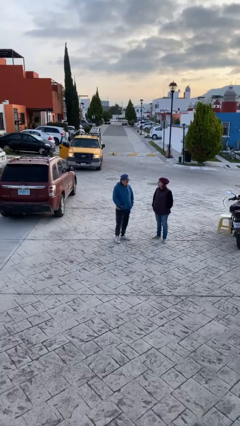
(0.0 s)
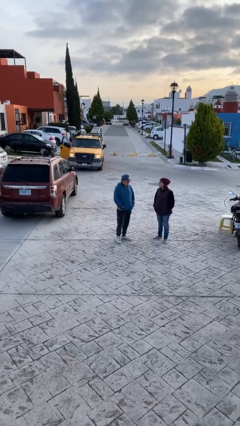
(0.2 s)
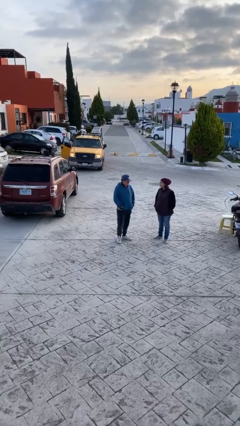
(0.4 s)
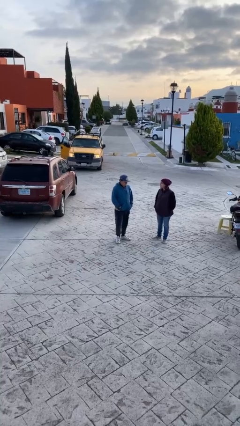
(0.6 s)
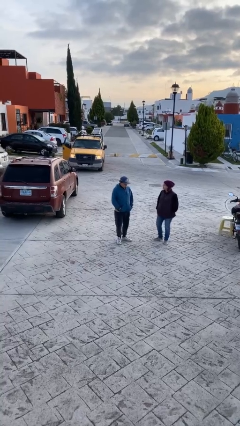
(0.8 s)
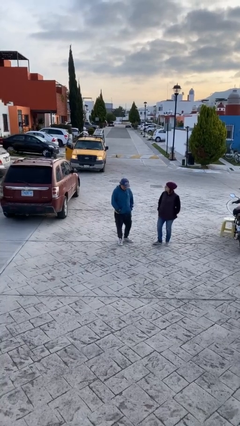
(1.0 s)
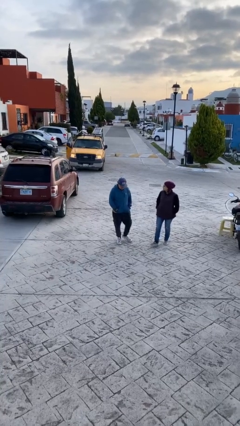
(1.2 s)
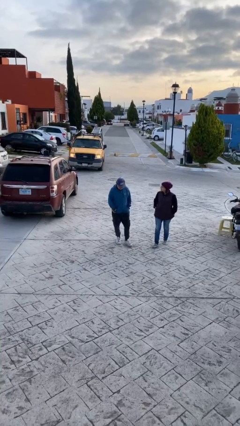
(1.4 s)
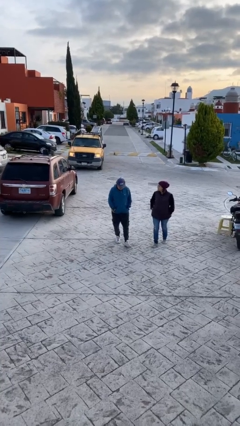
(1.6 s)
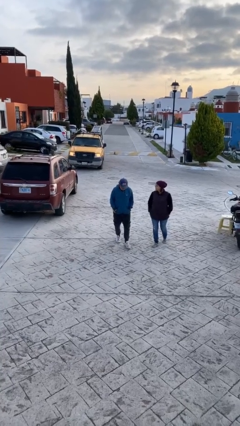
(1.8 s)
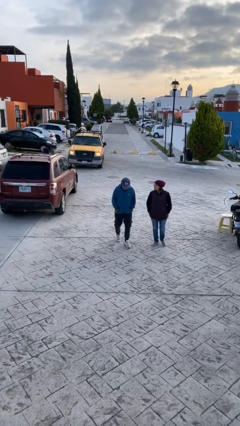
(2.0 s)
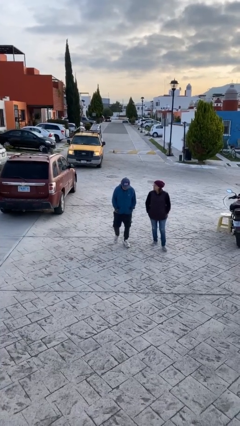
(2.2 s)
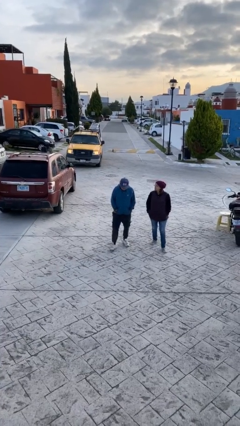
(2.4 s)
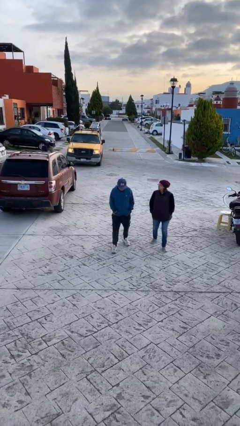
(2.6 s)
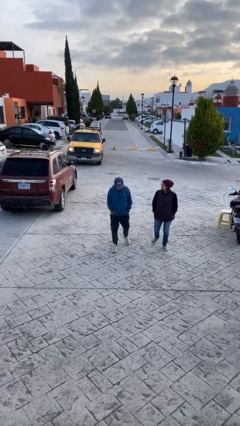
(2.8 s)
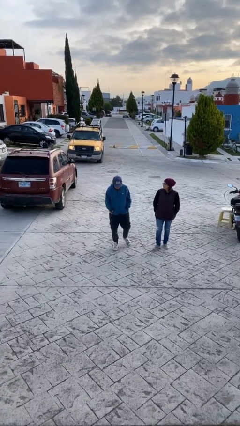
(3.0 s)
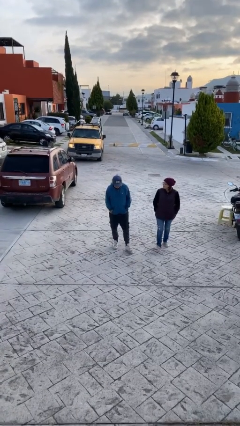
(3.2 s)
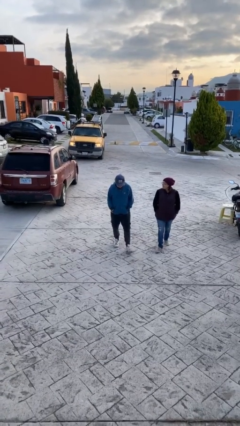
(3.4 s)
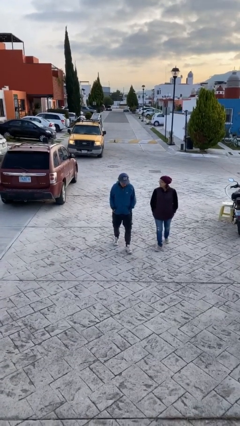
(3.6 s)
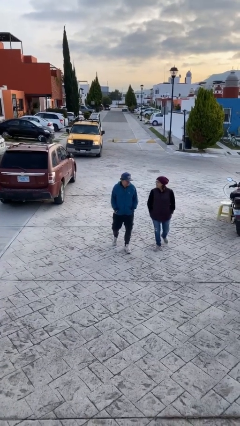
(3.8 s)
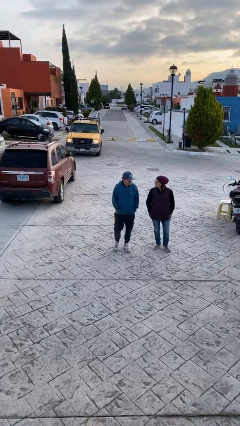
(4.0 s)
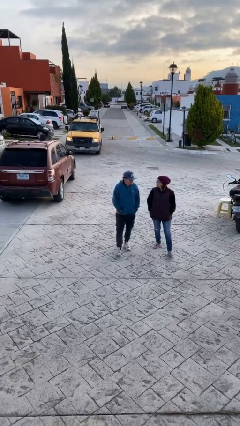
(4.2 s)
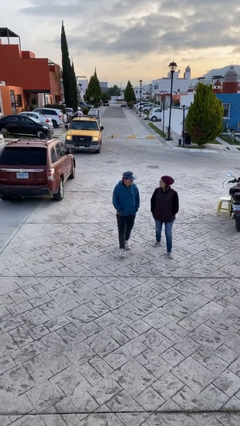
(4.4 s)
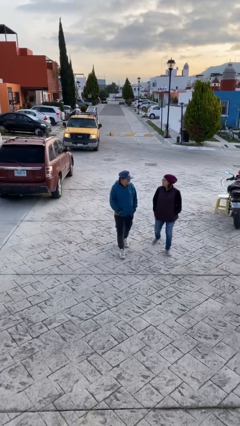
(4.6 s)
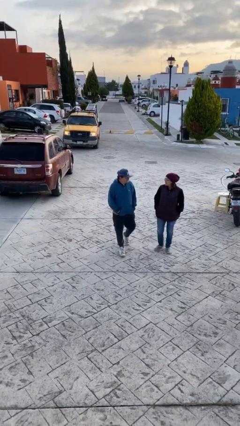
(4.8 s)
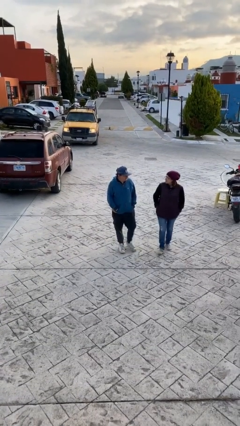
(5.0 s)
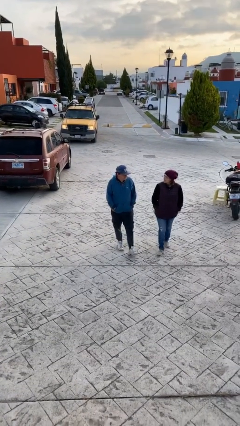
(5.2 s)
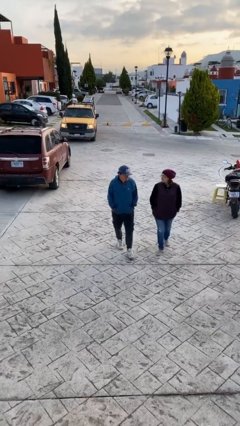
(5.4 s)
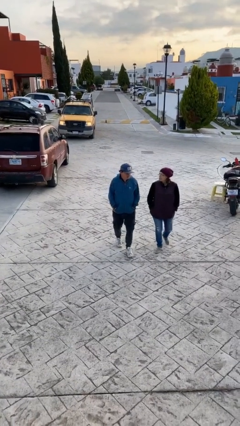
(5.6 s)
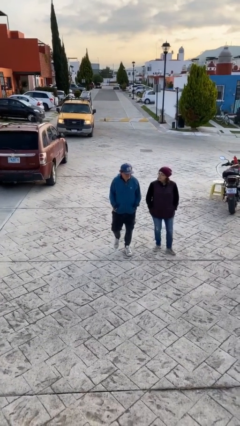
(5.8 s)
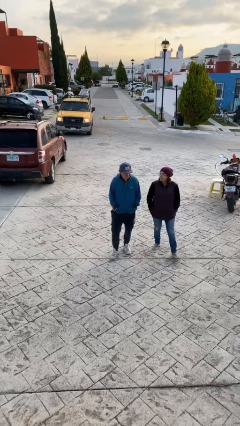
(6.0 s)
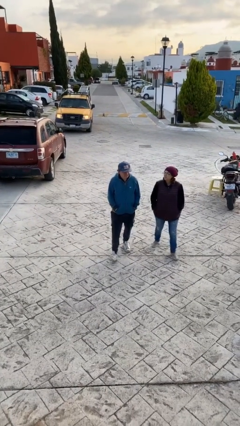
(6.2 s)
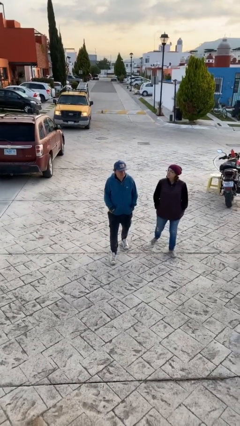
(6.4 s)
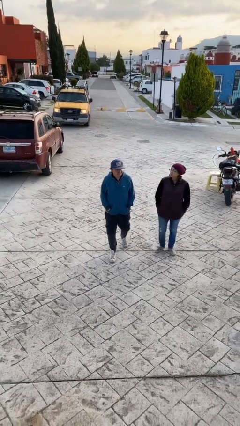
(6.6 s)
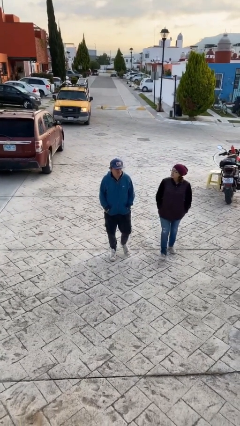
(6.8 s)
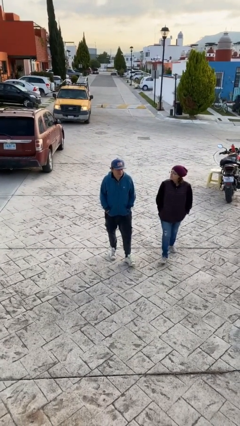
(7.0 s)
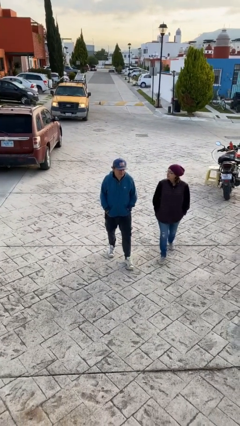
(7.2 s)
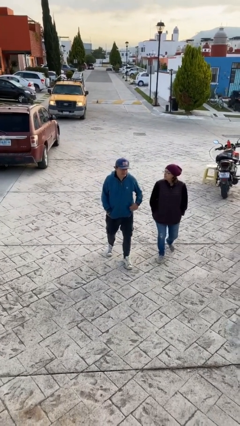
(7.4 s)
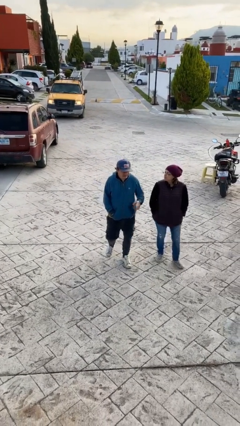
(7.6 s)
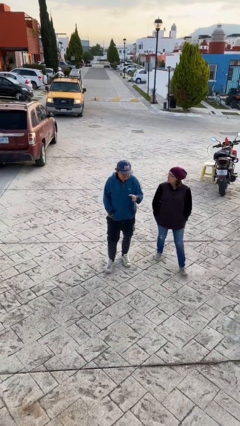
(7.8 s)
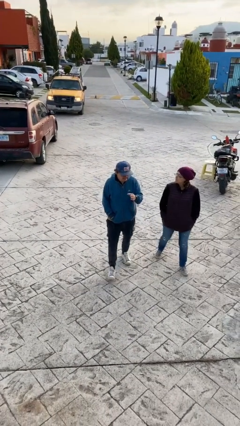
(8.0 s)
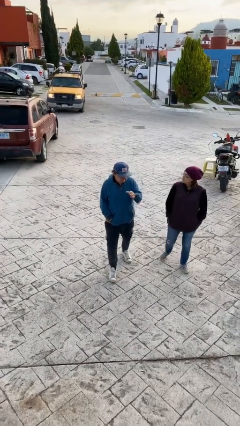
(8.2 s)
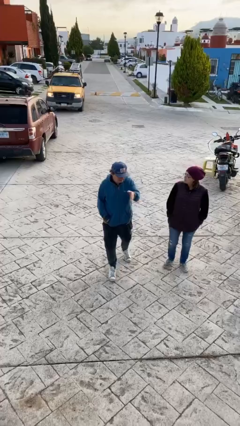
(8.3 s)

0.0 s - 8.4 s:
person talks to person

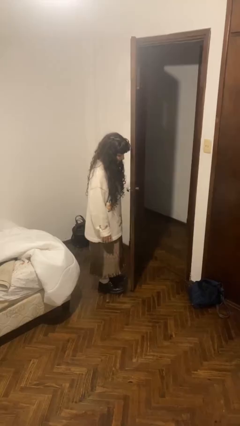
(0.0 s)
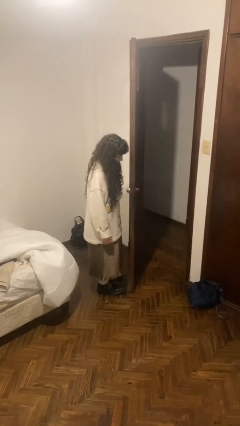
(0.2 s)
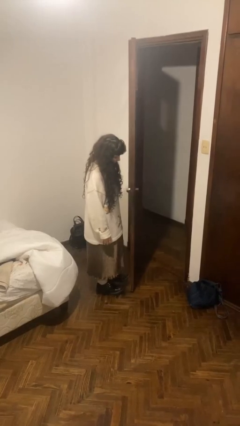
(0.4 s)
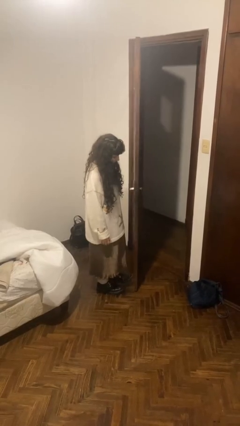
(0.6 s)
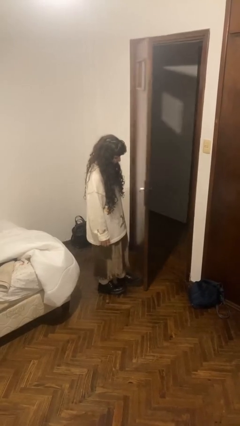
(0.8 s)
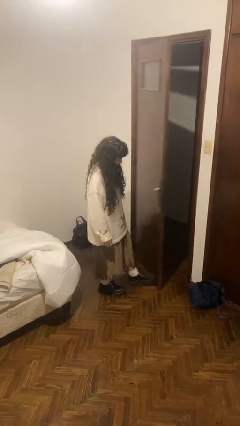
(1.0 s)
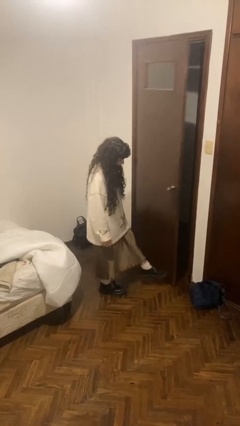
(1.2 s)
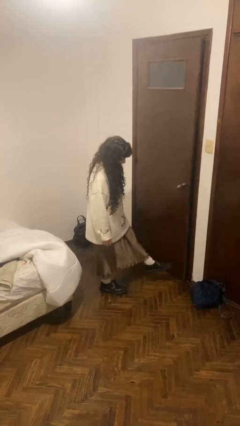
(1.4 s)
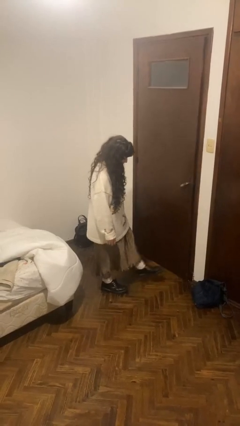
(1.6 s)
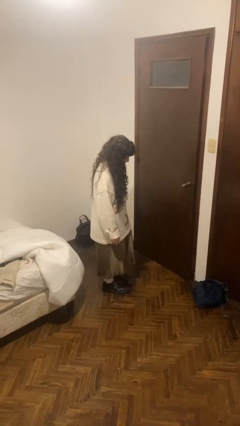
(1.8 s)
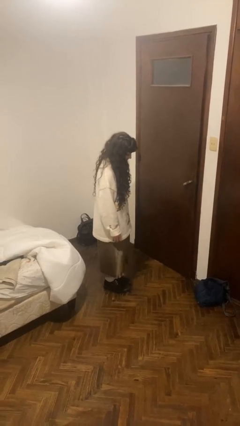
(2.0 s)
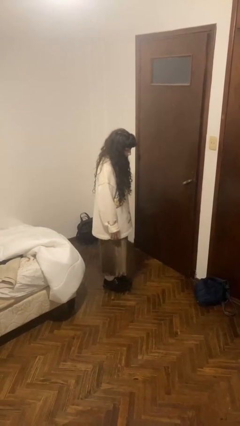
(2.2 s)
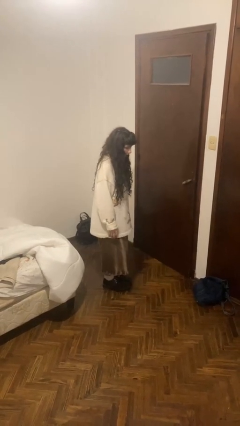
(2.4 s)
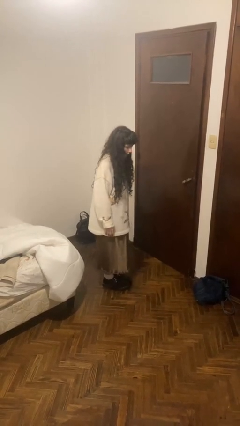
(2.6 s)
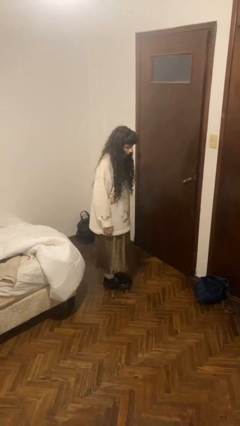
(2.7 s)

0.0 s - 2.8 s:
person closes door with foot

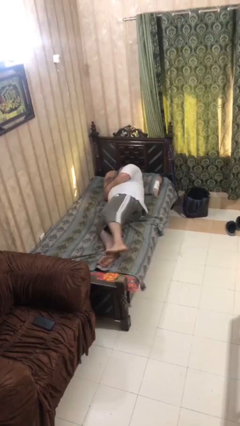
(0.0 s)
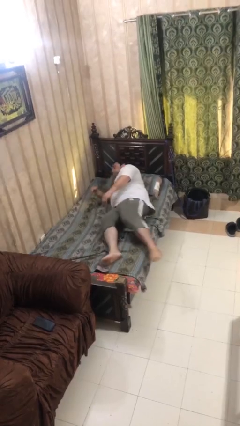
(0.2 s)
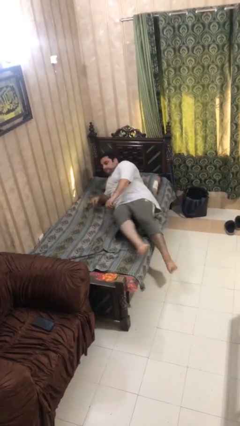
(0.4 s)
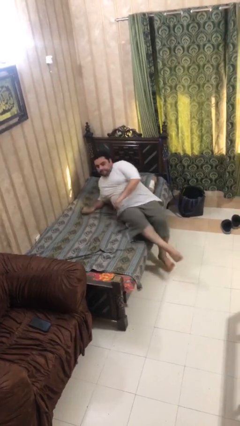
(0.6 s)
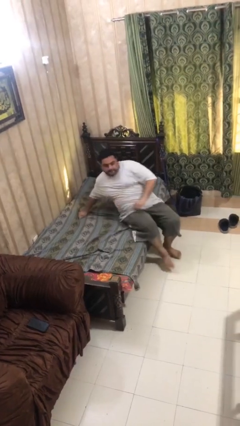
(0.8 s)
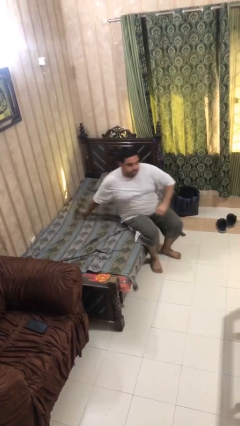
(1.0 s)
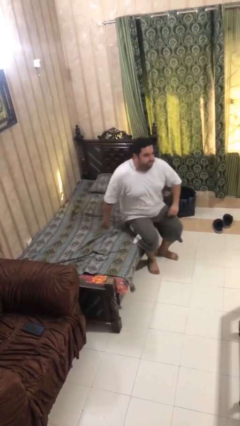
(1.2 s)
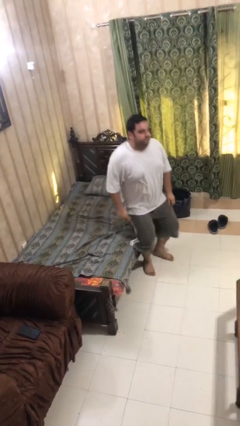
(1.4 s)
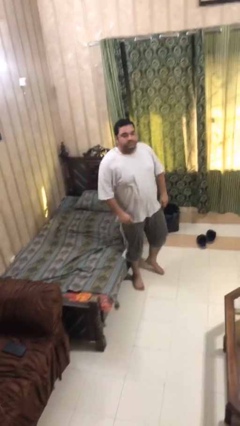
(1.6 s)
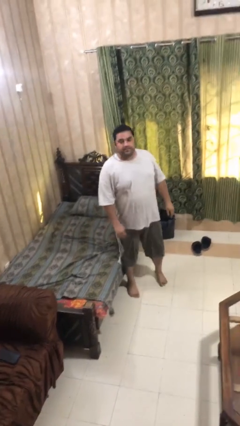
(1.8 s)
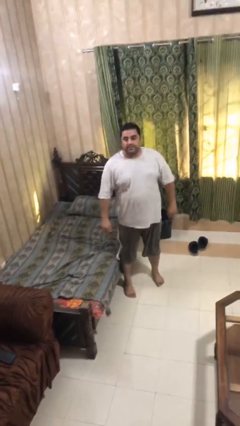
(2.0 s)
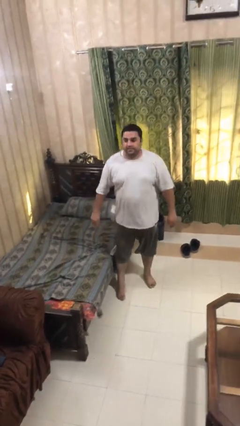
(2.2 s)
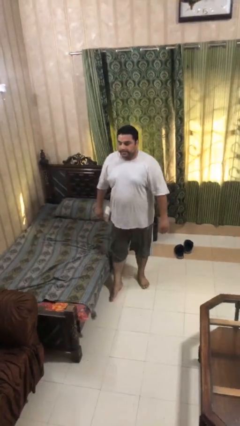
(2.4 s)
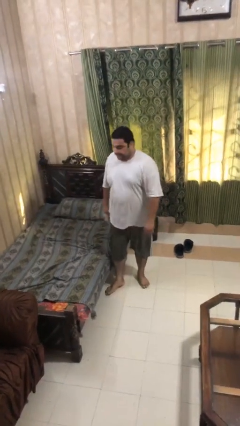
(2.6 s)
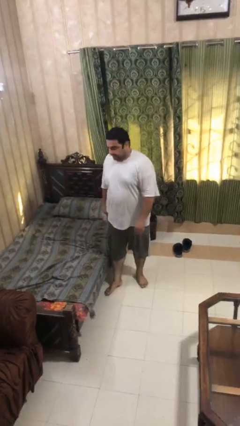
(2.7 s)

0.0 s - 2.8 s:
person stands up

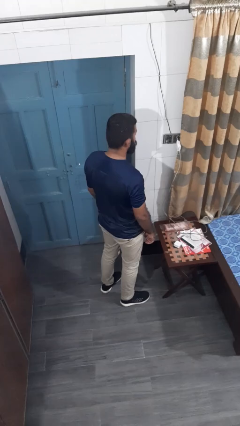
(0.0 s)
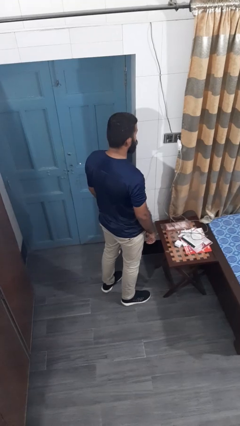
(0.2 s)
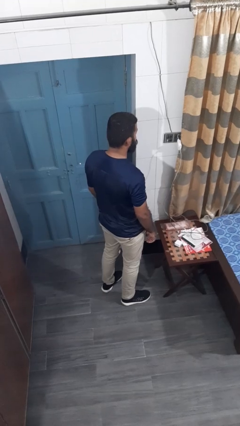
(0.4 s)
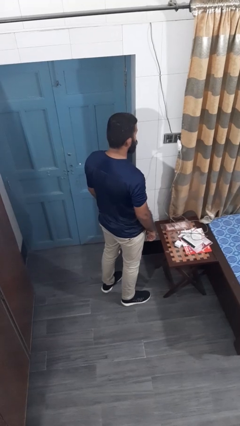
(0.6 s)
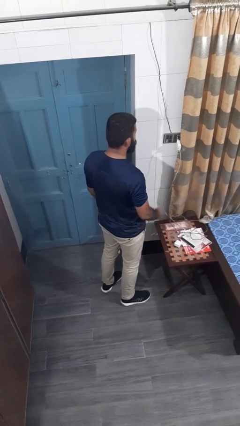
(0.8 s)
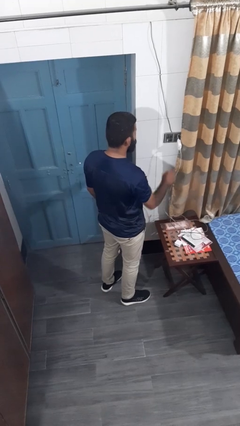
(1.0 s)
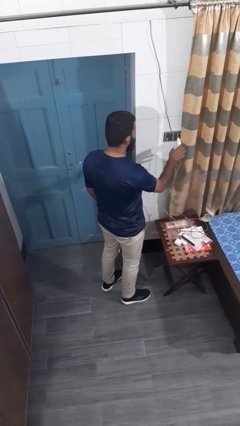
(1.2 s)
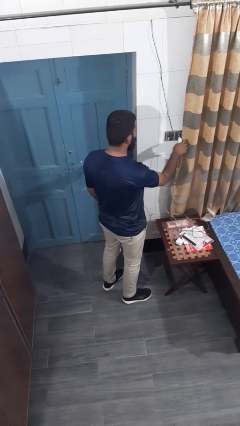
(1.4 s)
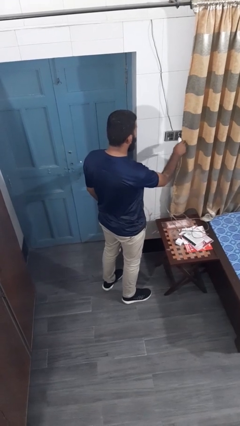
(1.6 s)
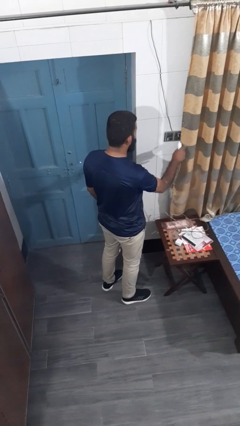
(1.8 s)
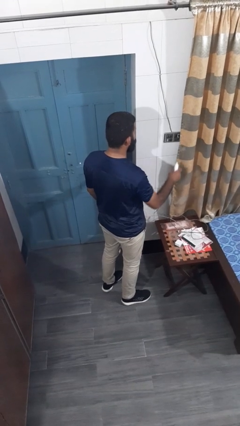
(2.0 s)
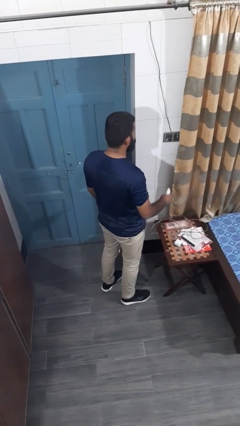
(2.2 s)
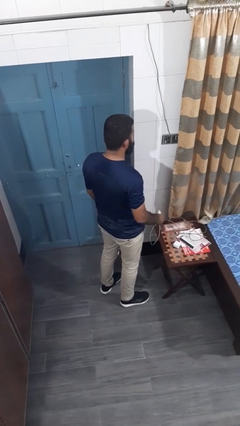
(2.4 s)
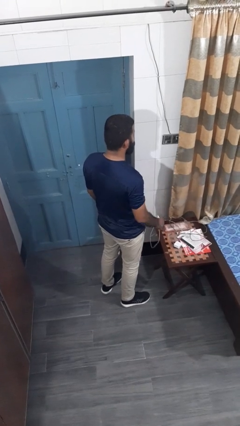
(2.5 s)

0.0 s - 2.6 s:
person unplugs from electrical socket

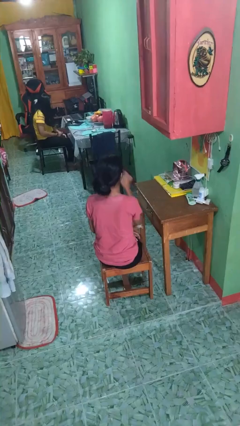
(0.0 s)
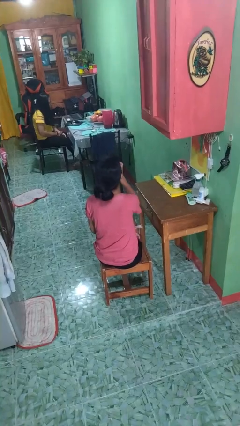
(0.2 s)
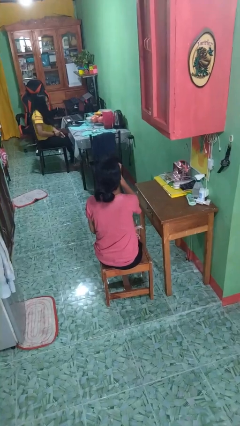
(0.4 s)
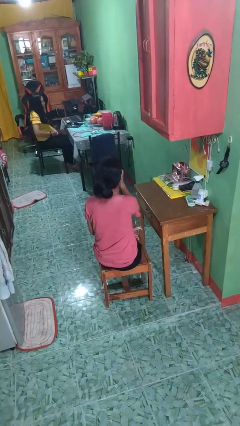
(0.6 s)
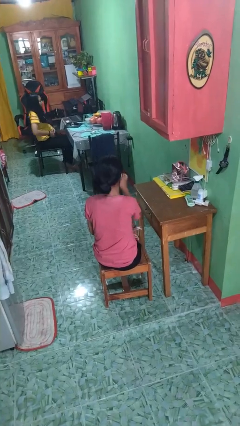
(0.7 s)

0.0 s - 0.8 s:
person drinks from shotglass

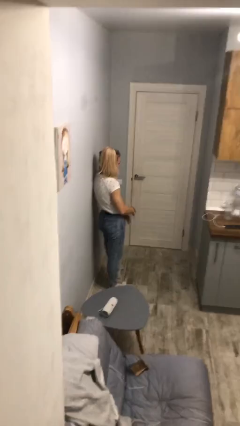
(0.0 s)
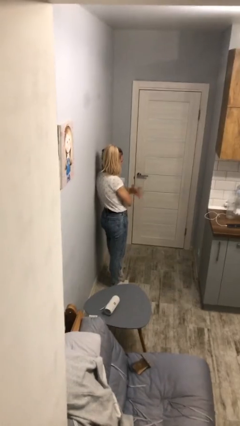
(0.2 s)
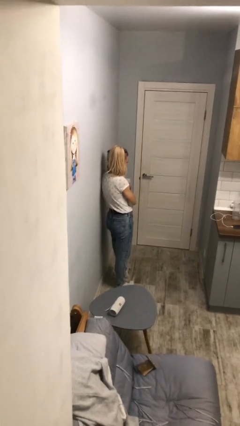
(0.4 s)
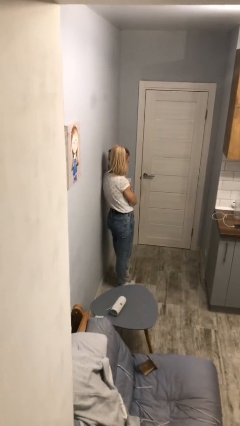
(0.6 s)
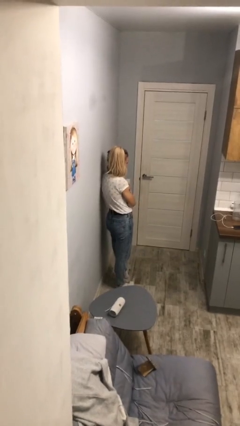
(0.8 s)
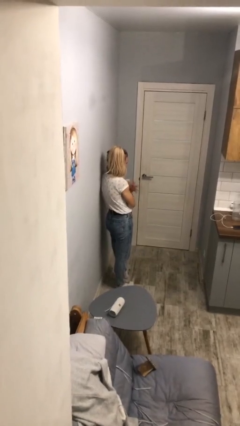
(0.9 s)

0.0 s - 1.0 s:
person crosses arms
